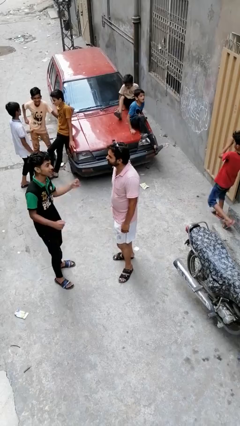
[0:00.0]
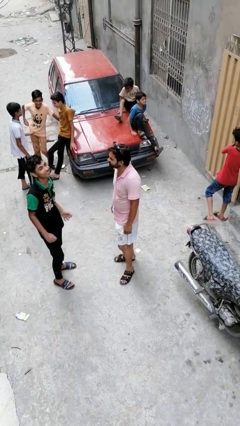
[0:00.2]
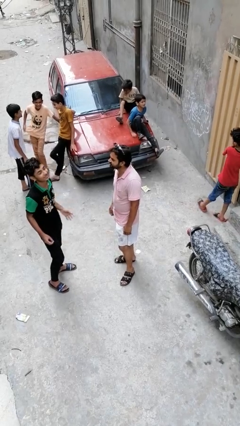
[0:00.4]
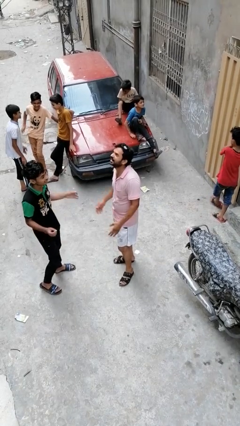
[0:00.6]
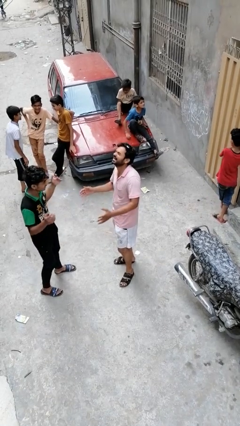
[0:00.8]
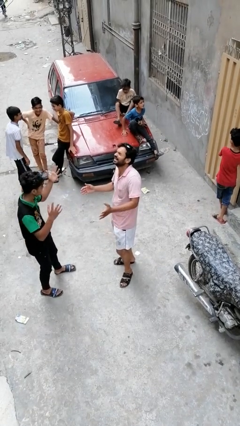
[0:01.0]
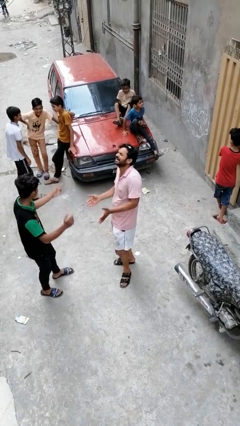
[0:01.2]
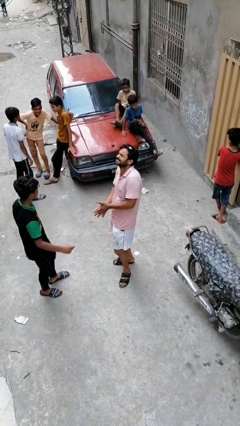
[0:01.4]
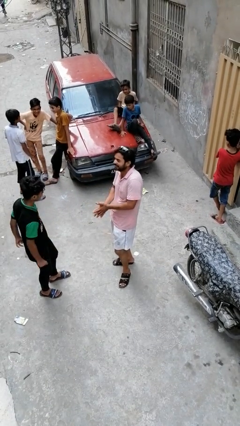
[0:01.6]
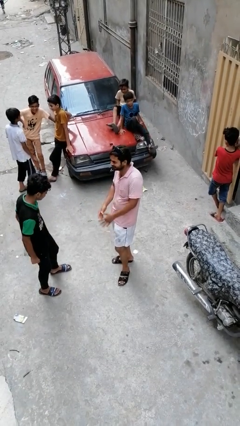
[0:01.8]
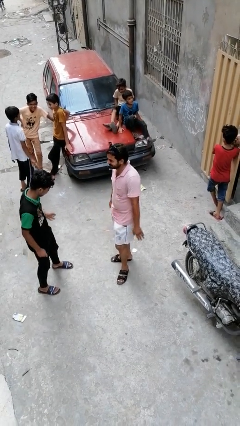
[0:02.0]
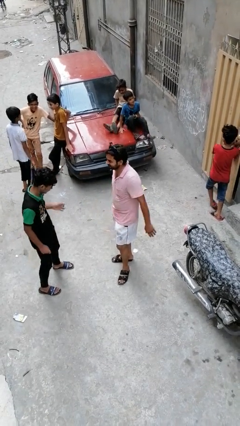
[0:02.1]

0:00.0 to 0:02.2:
person laughs with person

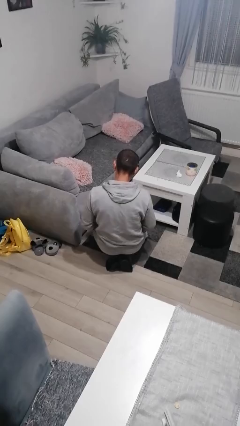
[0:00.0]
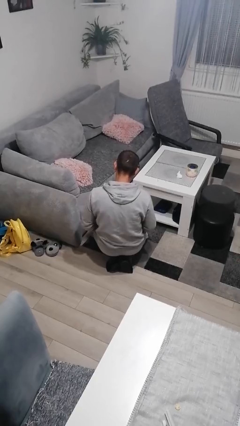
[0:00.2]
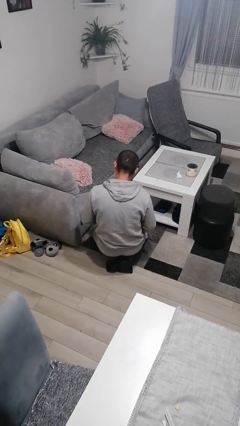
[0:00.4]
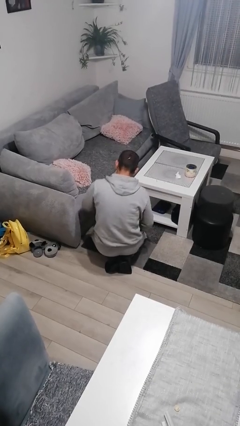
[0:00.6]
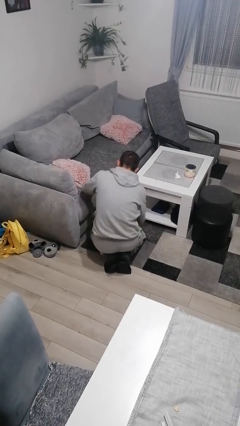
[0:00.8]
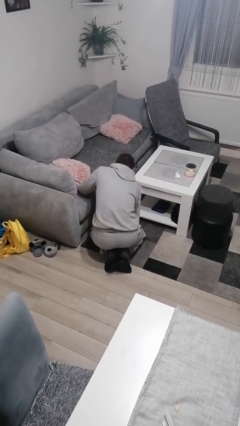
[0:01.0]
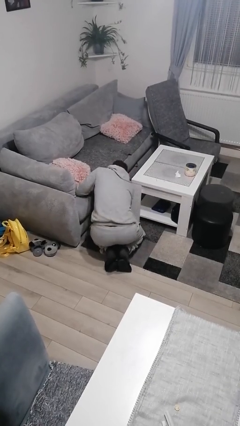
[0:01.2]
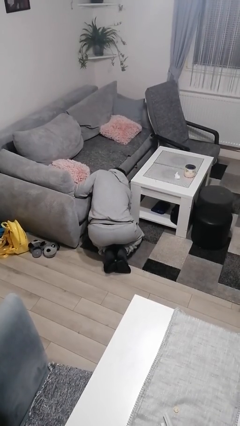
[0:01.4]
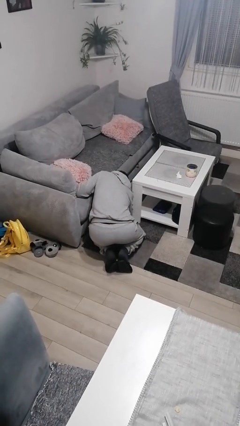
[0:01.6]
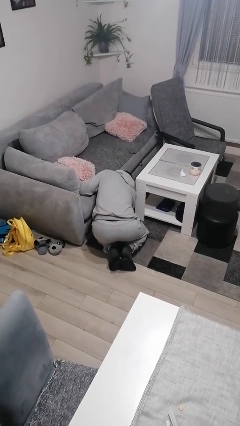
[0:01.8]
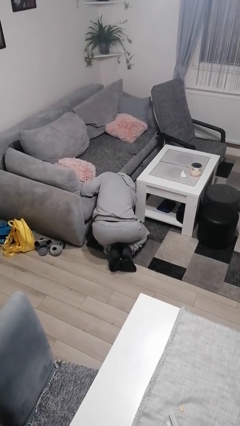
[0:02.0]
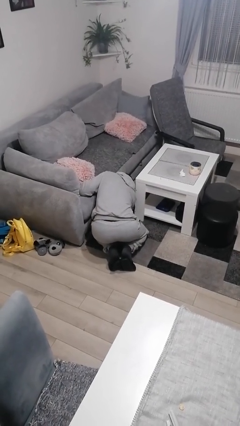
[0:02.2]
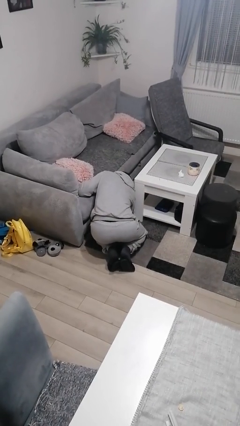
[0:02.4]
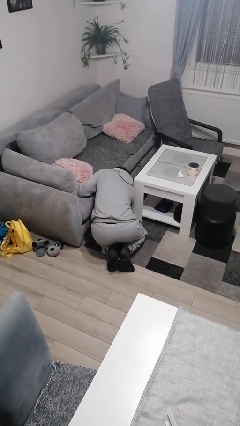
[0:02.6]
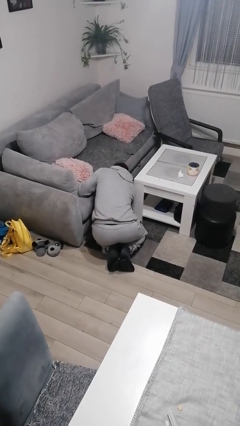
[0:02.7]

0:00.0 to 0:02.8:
person searches under couch

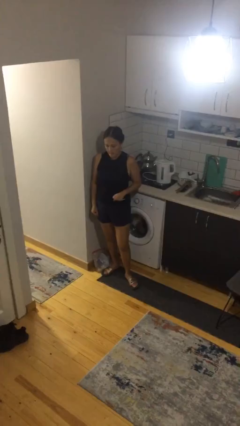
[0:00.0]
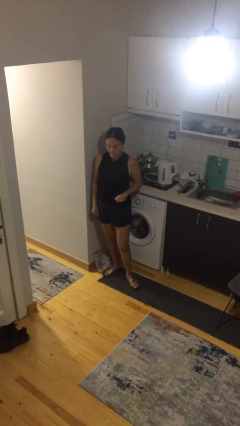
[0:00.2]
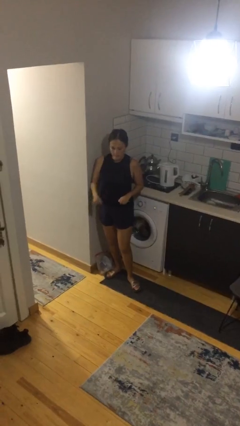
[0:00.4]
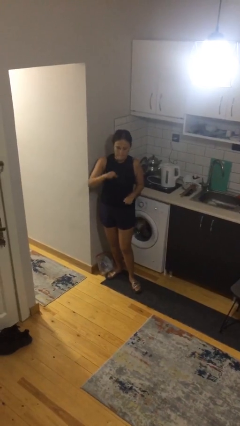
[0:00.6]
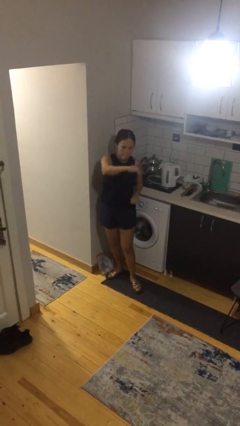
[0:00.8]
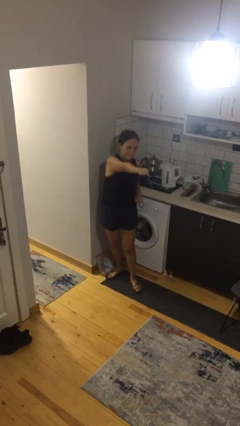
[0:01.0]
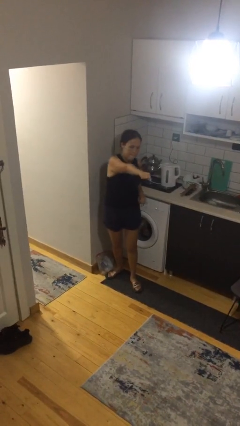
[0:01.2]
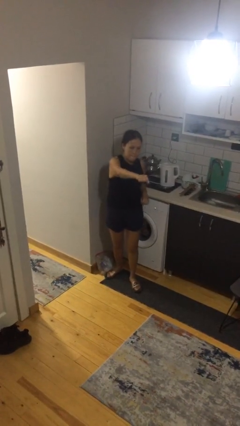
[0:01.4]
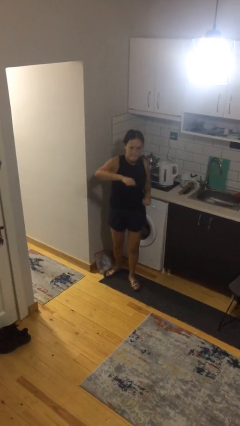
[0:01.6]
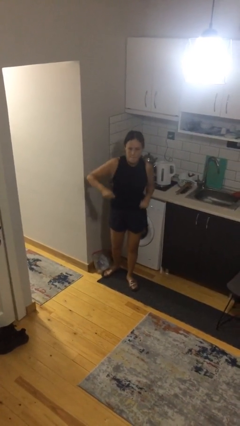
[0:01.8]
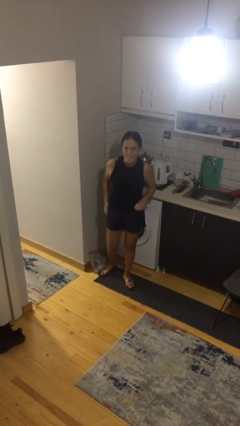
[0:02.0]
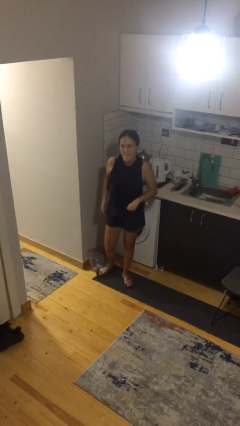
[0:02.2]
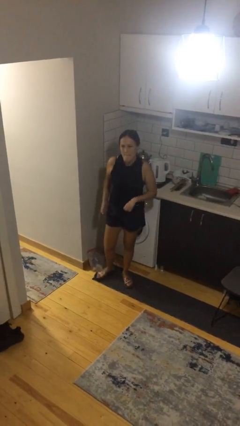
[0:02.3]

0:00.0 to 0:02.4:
person punches

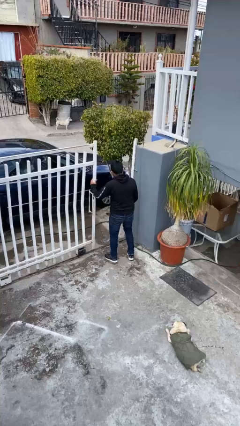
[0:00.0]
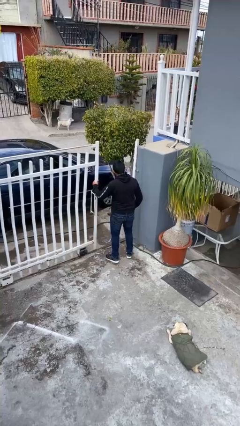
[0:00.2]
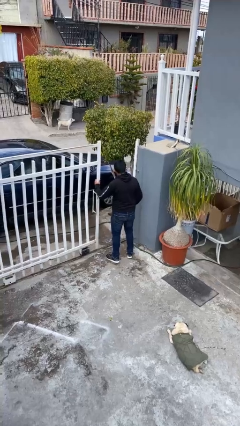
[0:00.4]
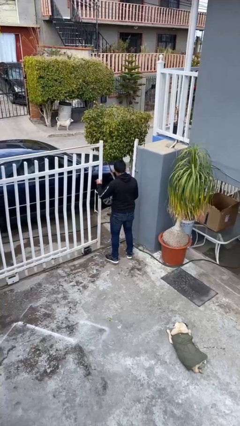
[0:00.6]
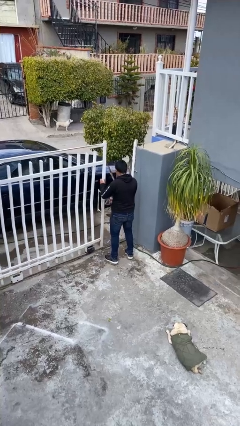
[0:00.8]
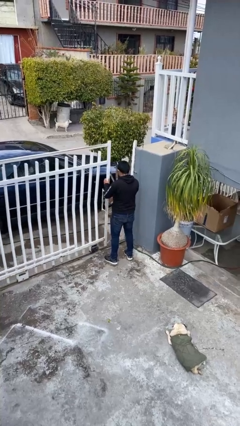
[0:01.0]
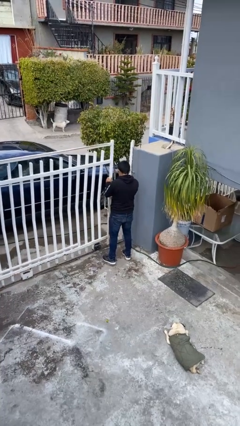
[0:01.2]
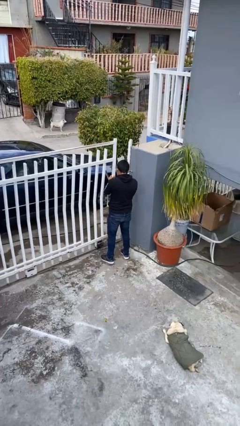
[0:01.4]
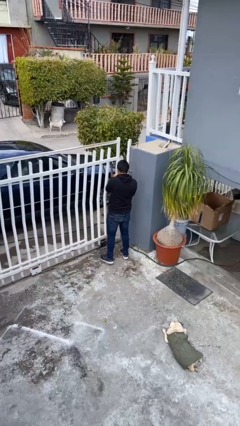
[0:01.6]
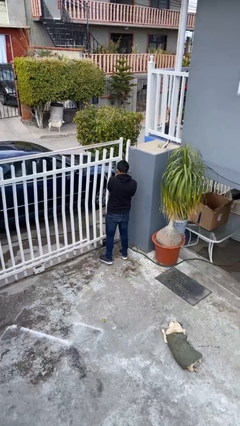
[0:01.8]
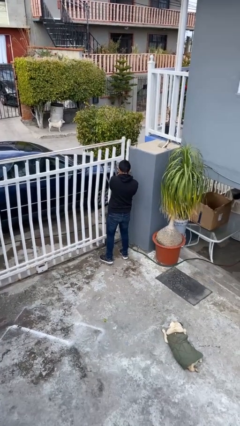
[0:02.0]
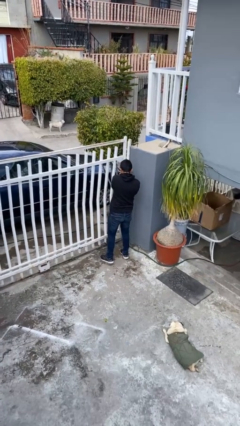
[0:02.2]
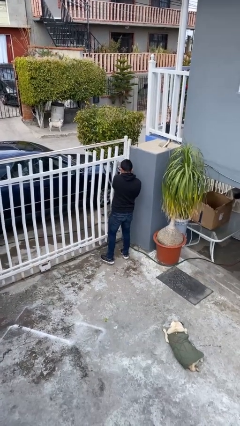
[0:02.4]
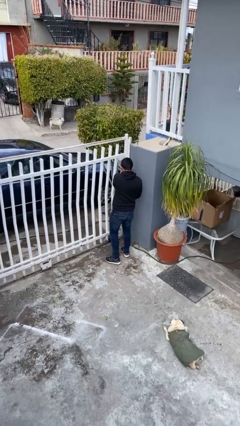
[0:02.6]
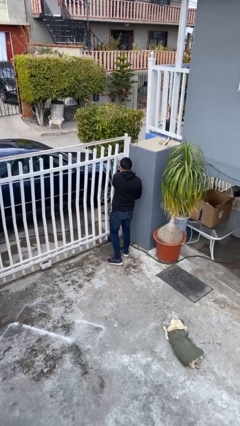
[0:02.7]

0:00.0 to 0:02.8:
person closes facility door

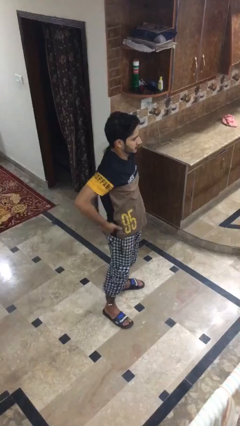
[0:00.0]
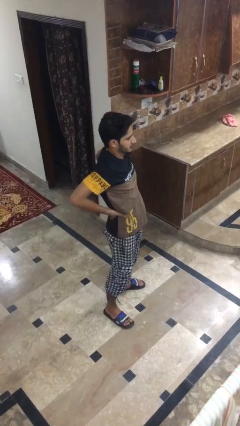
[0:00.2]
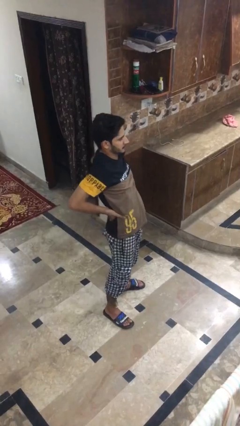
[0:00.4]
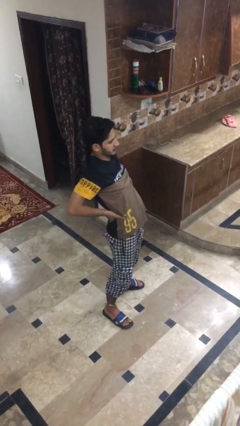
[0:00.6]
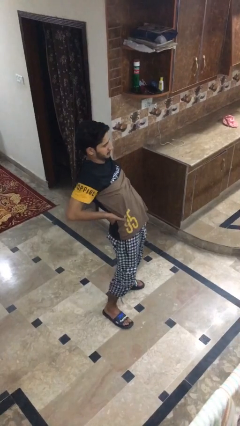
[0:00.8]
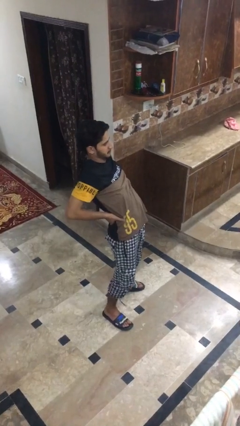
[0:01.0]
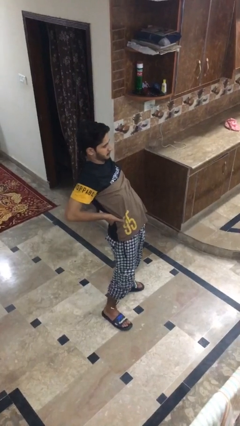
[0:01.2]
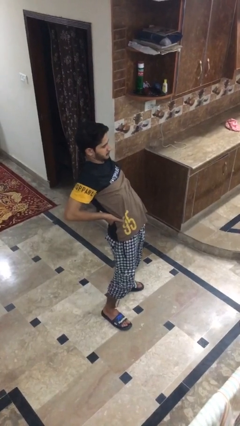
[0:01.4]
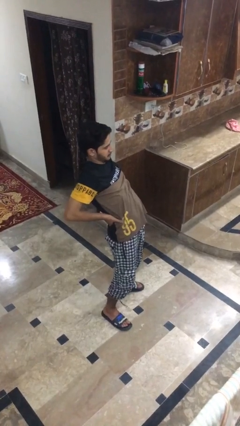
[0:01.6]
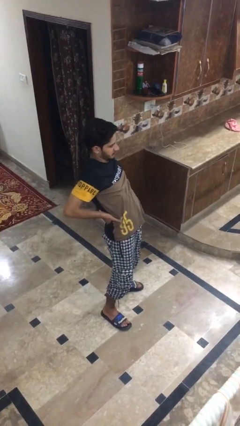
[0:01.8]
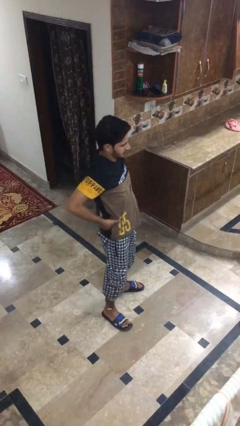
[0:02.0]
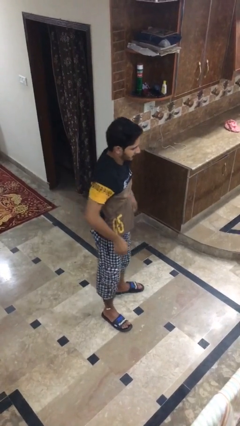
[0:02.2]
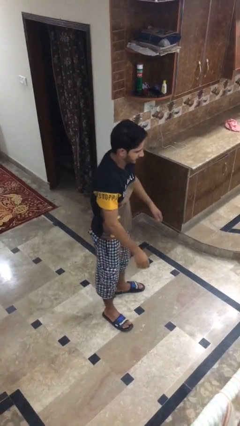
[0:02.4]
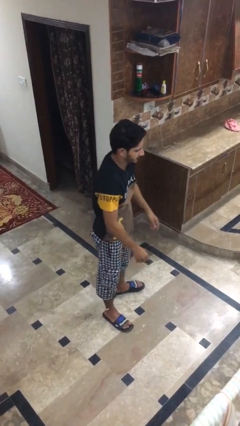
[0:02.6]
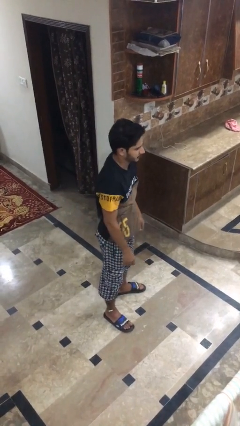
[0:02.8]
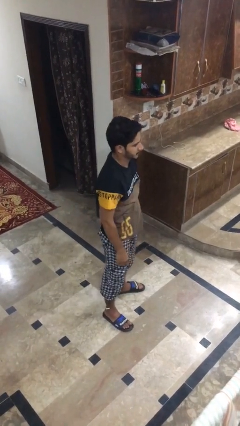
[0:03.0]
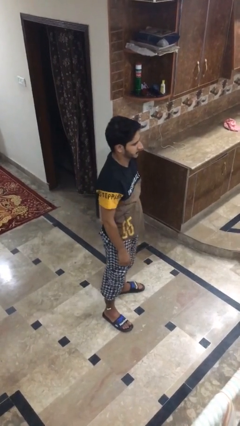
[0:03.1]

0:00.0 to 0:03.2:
person stretches back

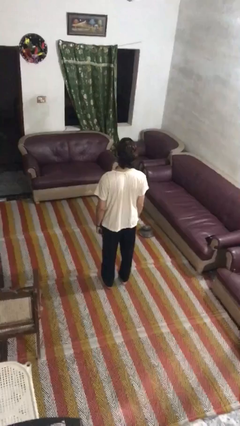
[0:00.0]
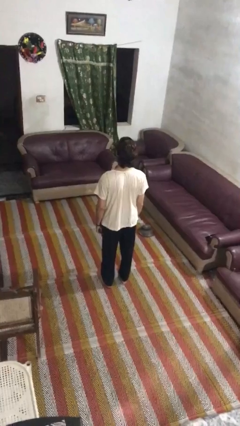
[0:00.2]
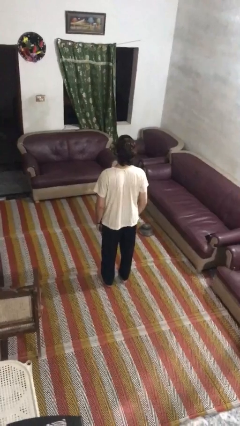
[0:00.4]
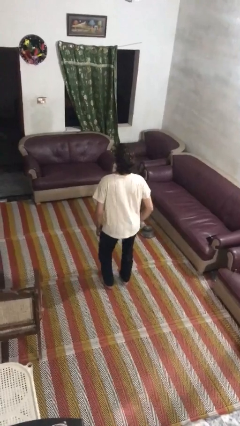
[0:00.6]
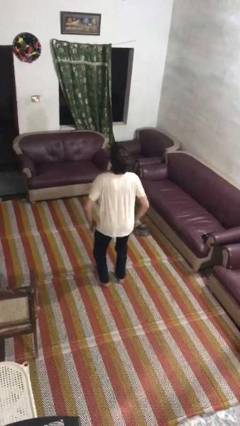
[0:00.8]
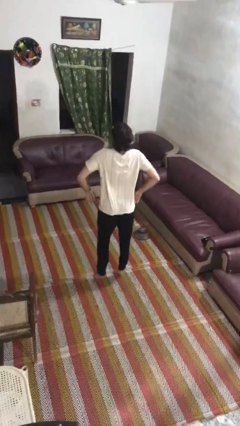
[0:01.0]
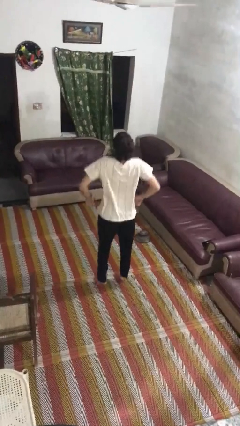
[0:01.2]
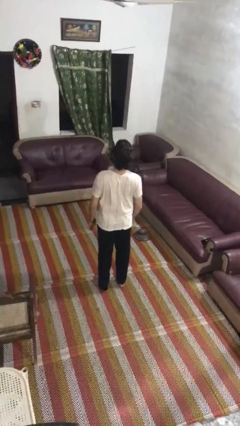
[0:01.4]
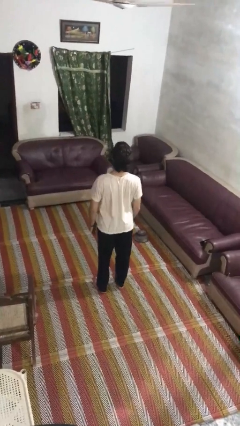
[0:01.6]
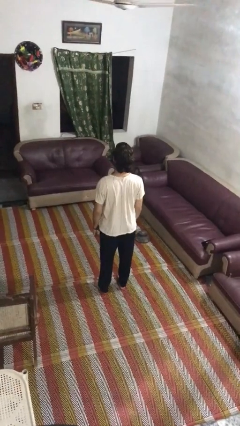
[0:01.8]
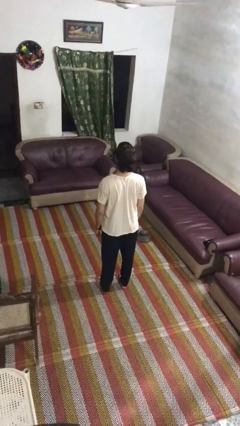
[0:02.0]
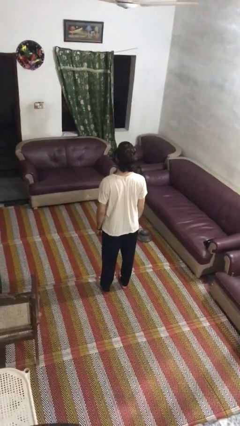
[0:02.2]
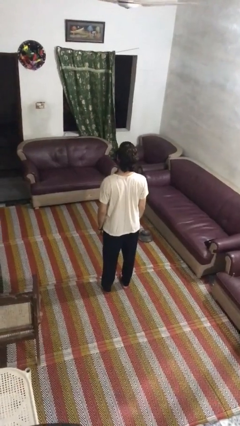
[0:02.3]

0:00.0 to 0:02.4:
person jumps

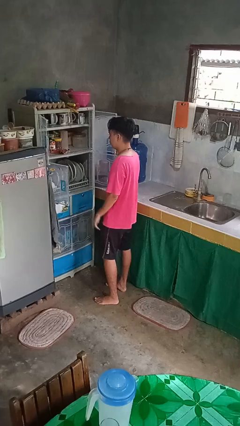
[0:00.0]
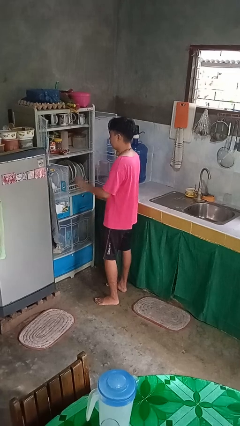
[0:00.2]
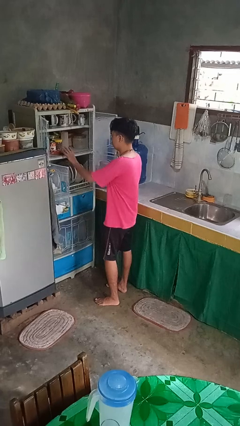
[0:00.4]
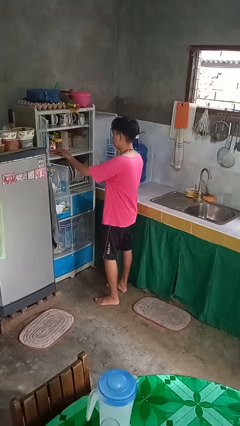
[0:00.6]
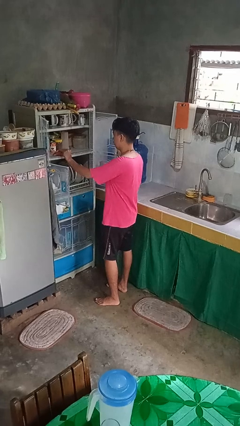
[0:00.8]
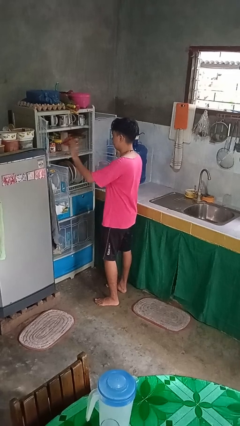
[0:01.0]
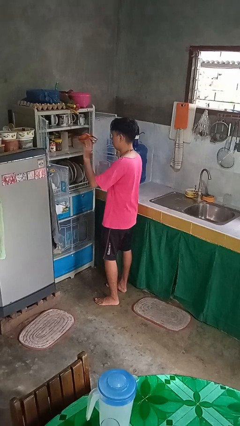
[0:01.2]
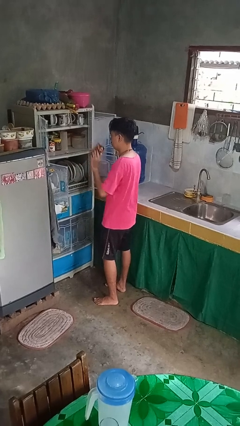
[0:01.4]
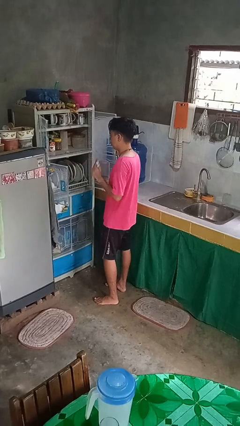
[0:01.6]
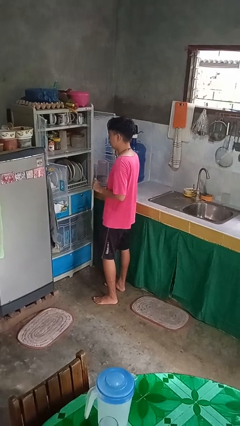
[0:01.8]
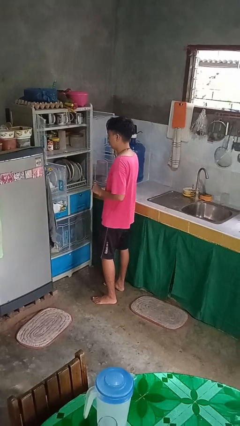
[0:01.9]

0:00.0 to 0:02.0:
person takes object from cabinet
